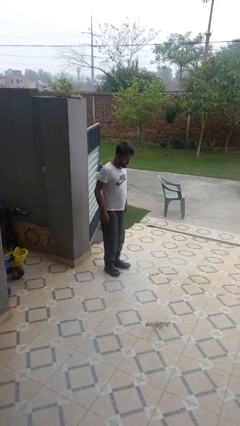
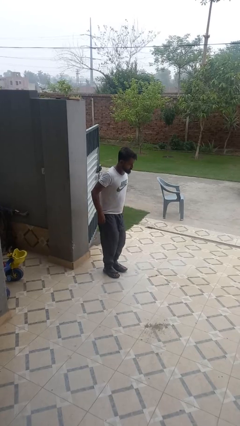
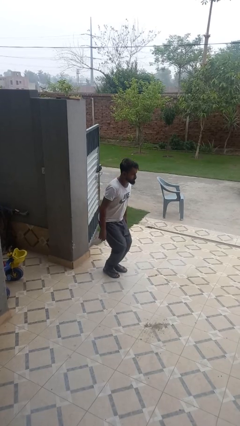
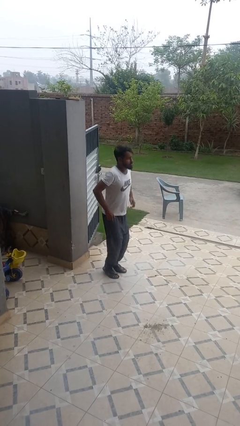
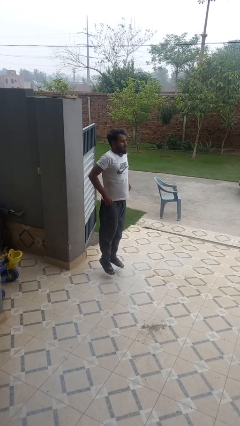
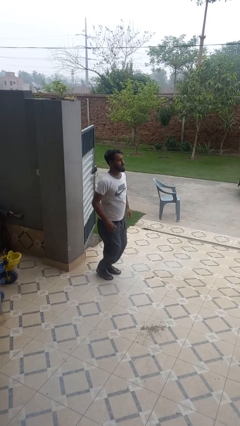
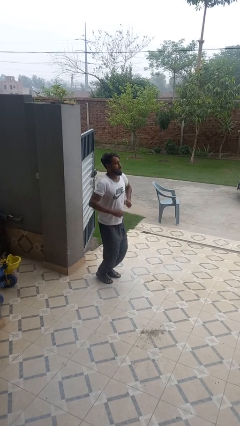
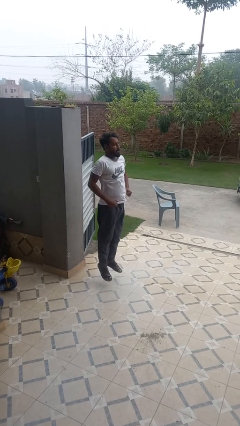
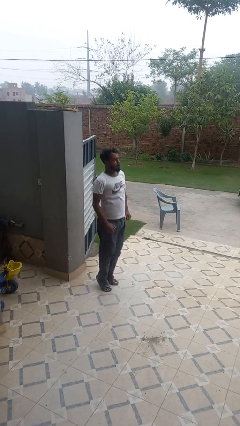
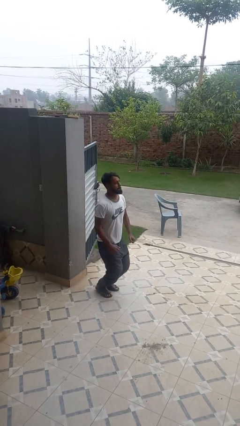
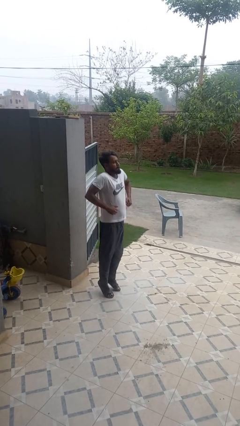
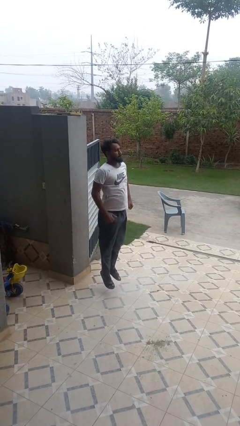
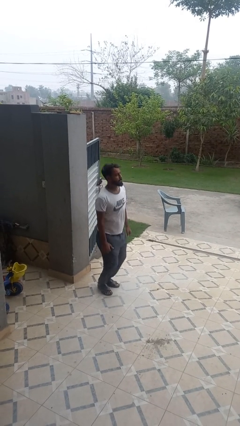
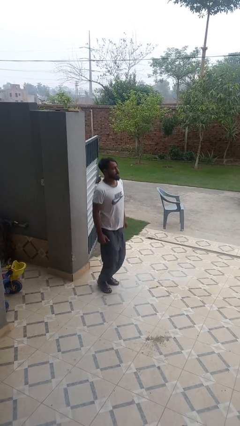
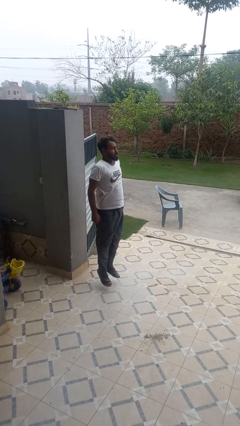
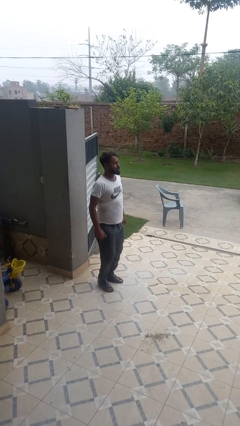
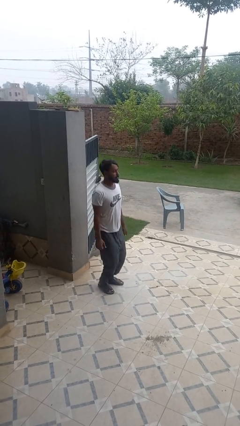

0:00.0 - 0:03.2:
person jumps

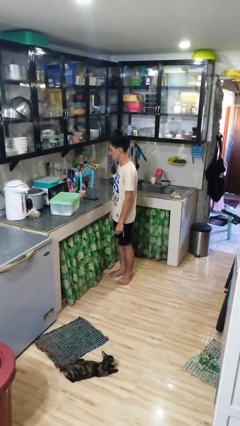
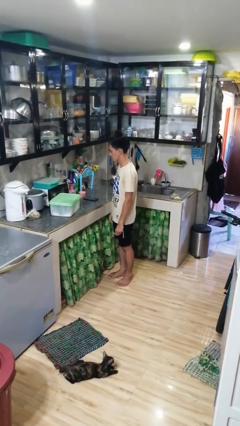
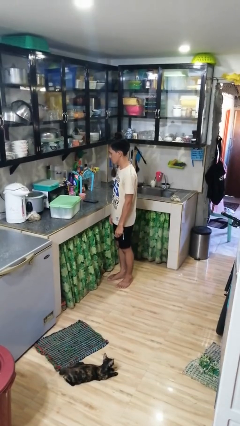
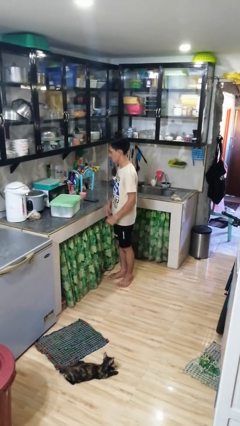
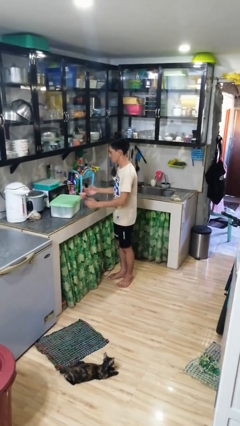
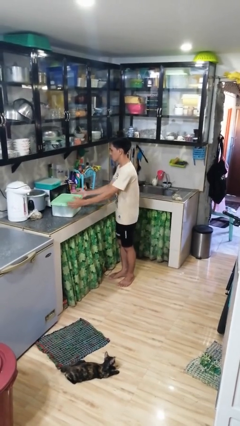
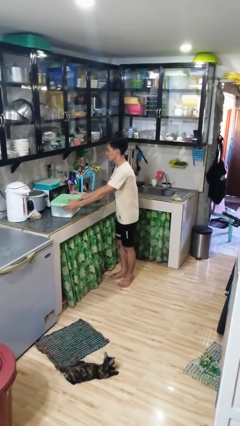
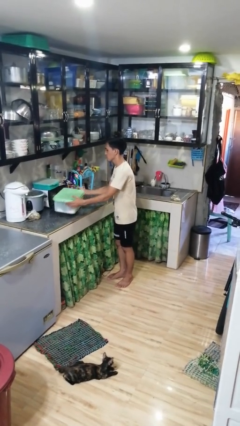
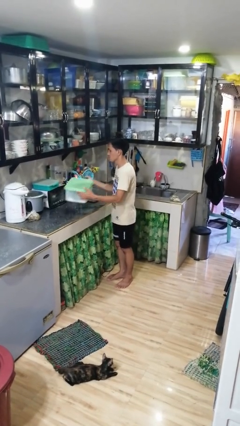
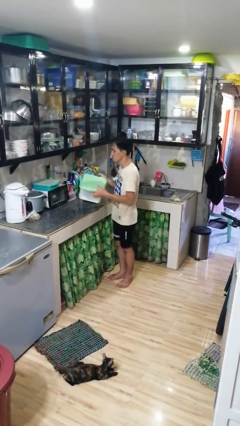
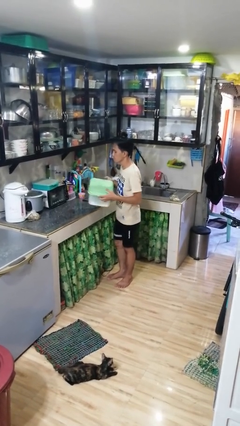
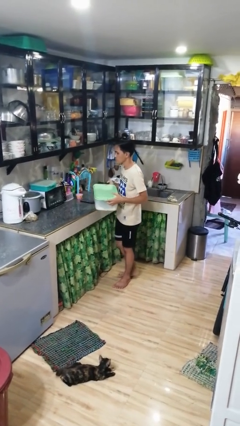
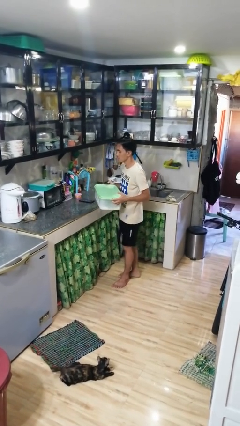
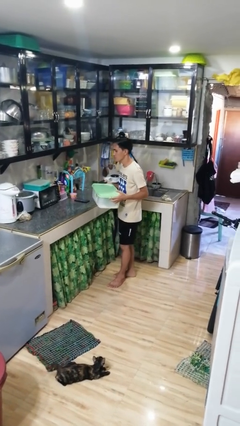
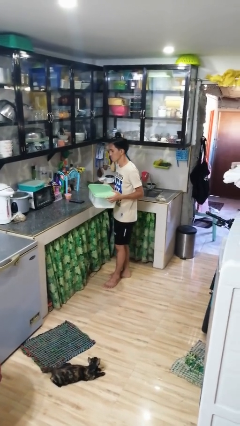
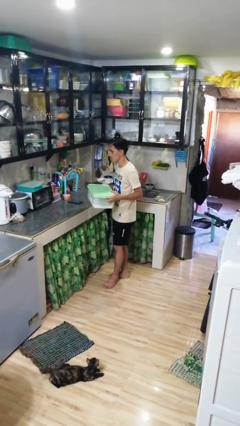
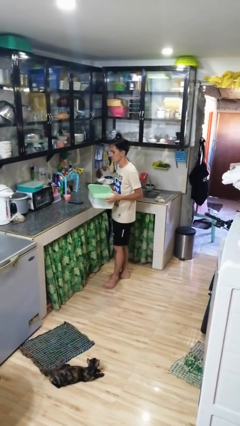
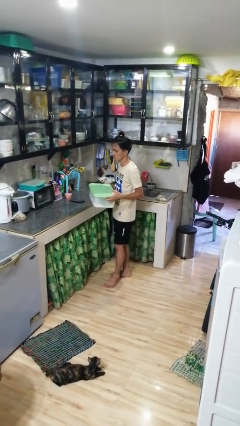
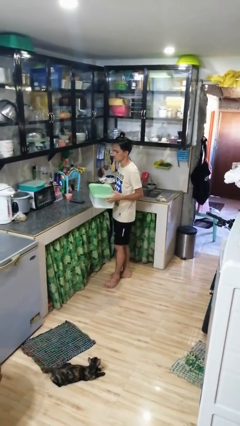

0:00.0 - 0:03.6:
person picks up object from countertop

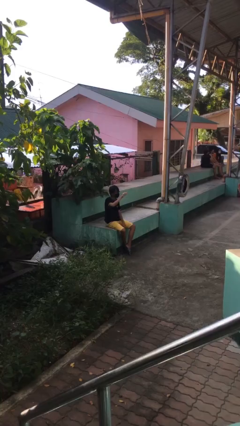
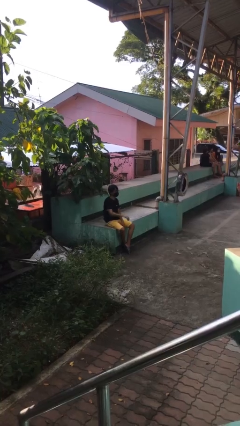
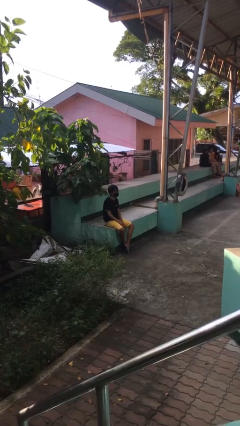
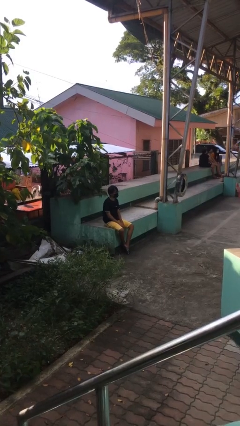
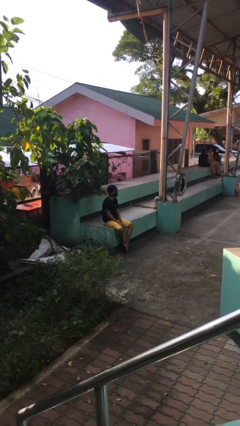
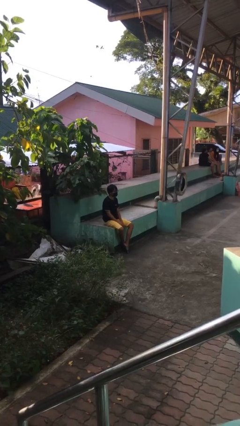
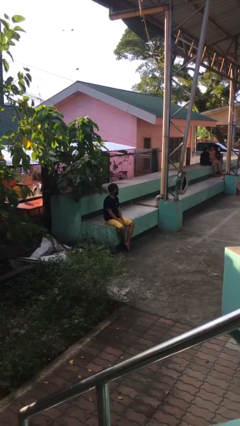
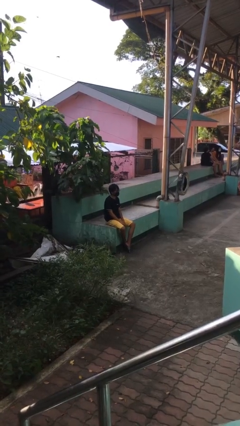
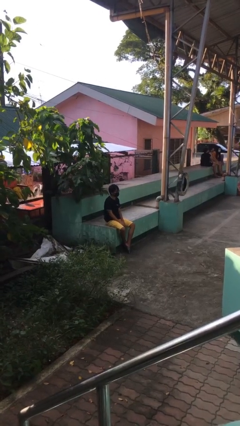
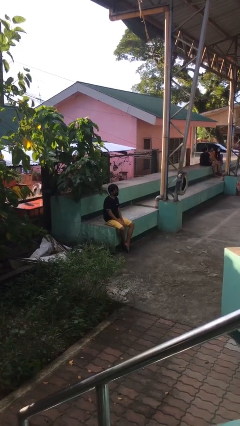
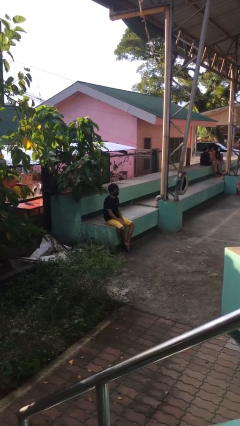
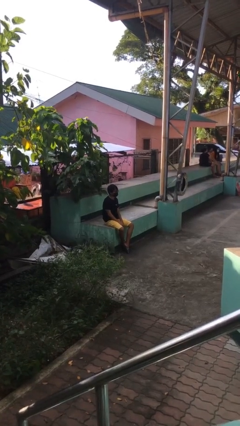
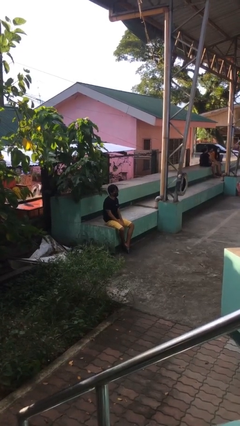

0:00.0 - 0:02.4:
person gestures lower hand

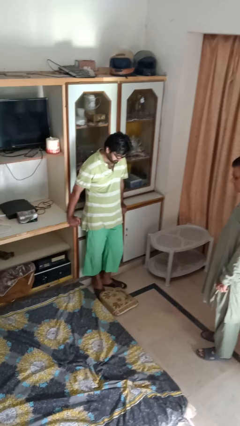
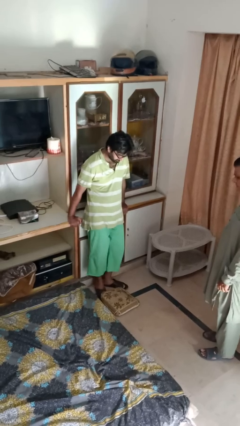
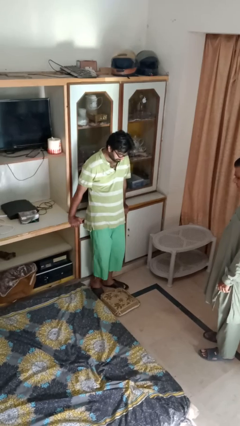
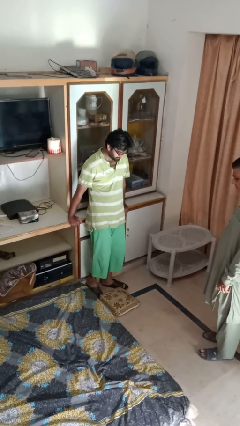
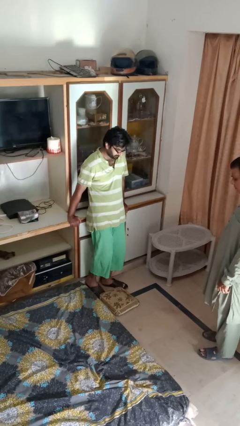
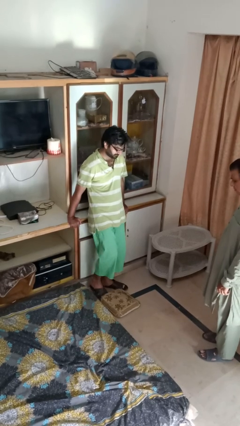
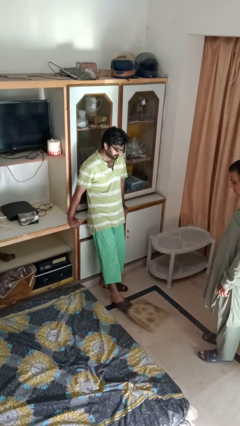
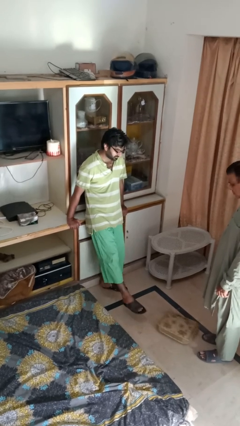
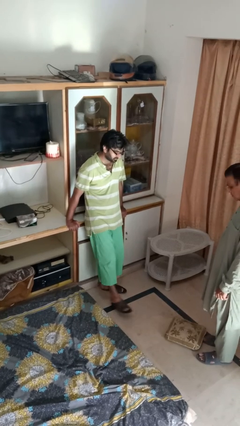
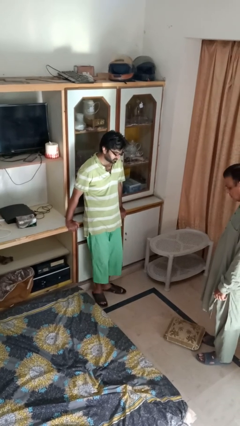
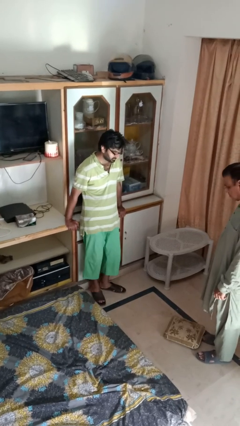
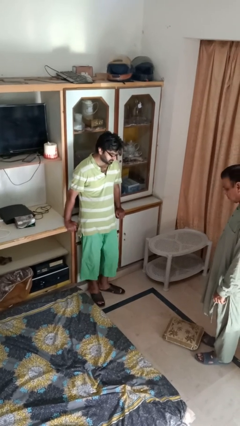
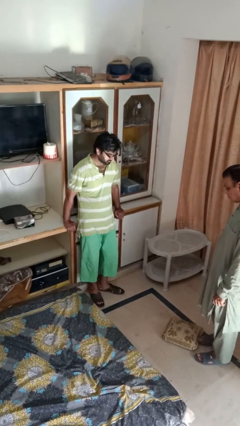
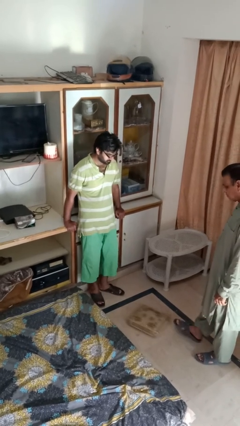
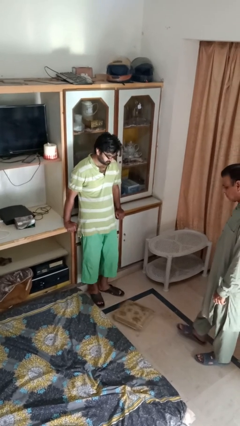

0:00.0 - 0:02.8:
person kicks object to person

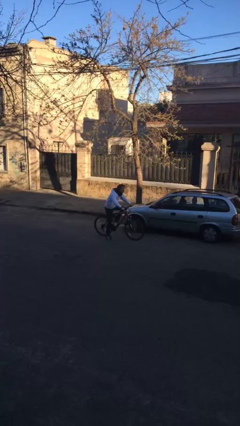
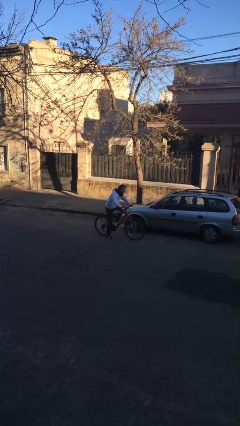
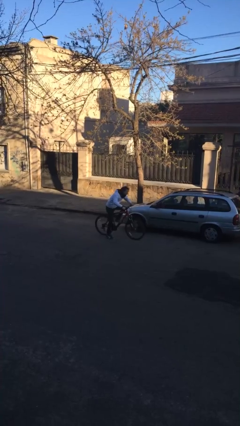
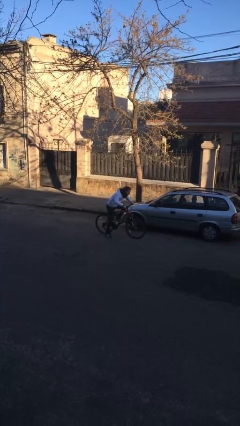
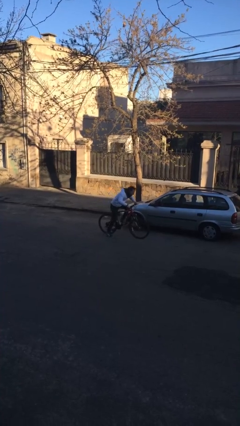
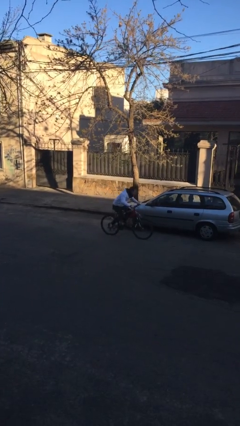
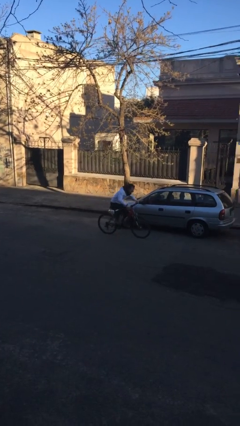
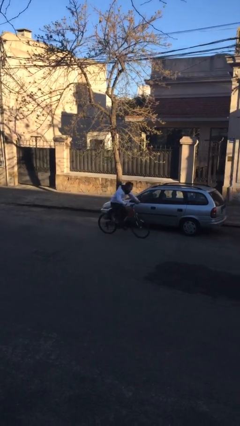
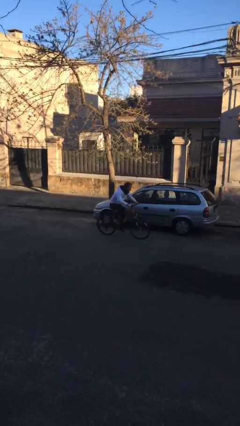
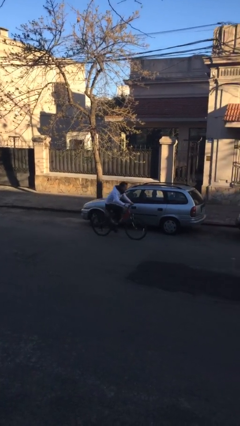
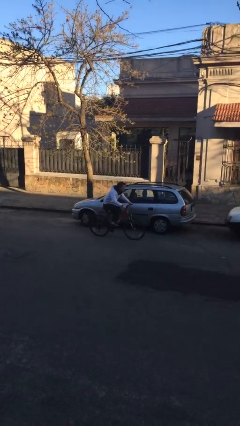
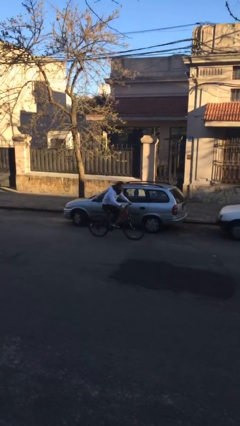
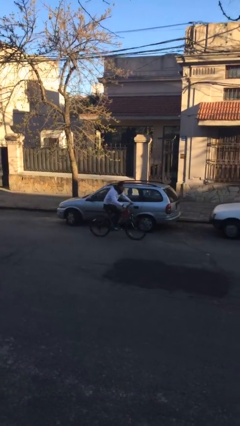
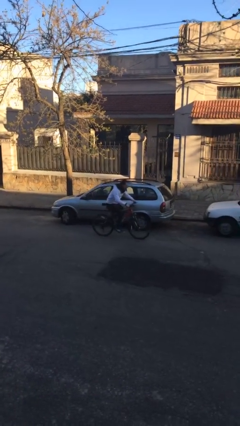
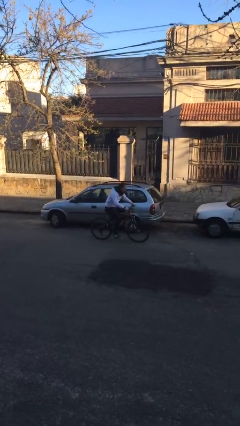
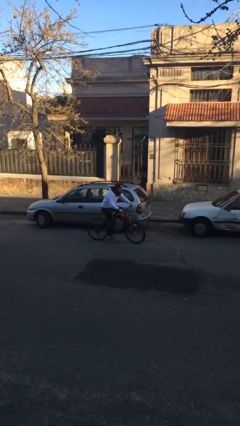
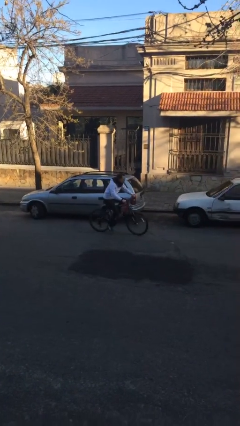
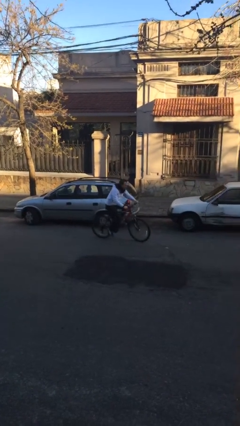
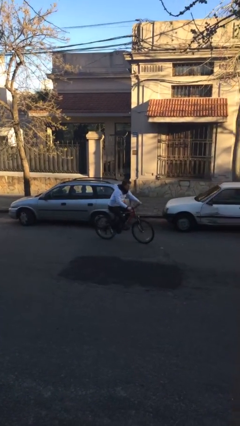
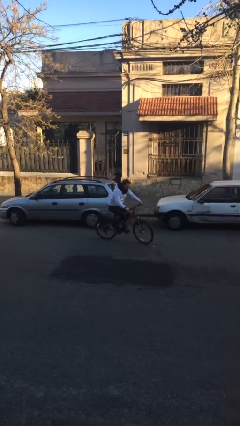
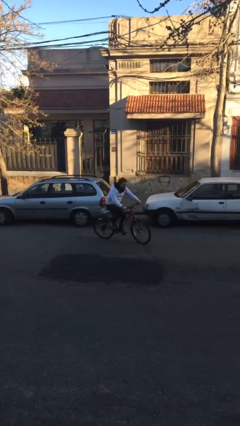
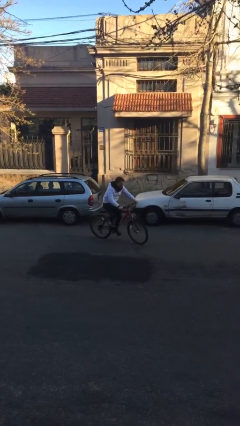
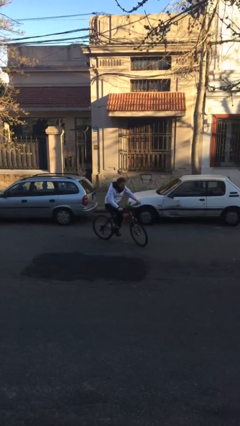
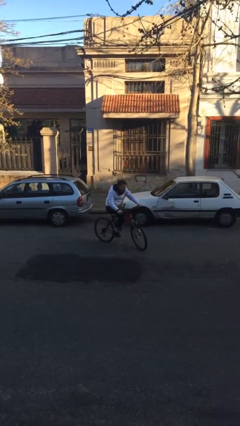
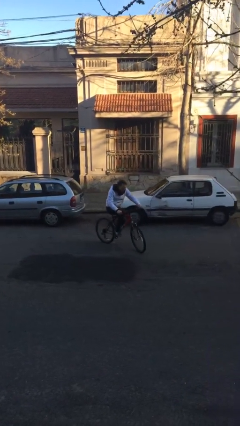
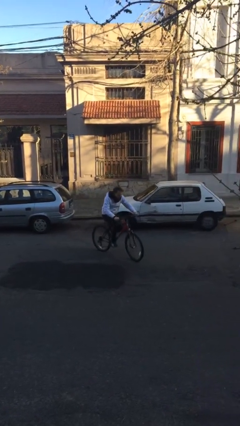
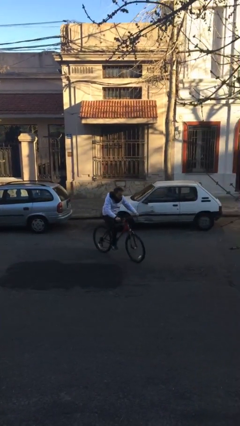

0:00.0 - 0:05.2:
person rides bicycle
